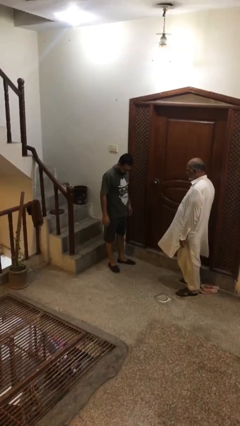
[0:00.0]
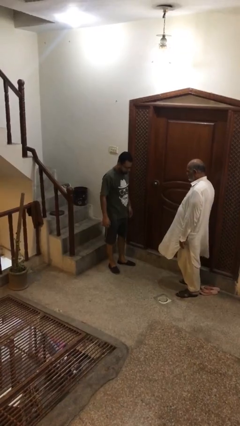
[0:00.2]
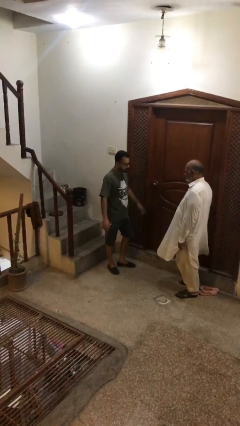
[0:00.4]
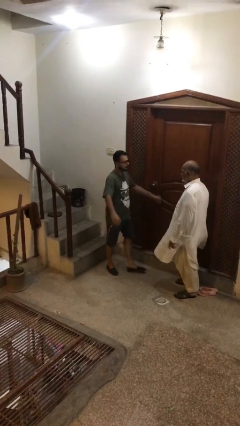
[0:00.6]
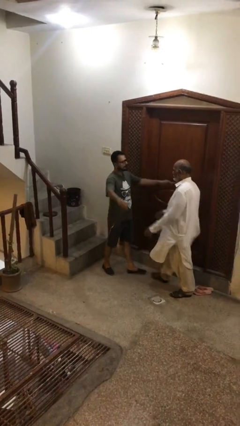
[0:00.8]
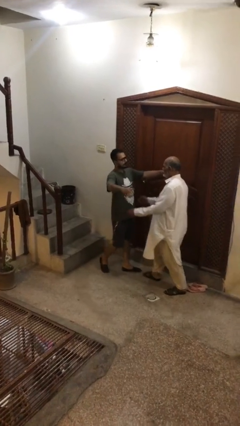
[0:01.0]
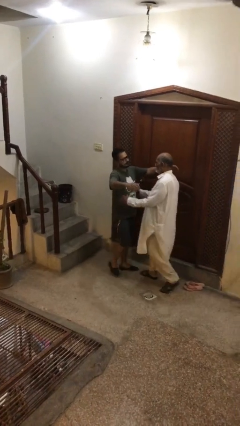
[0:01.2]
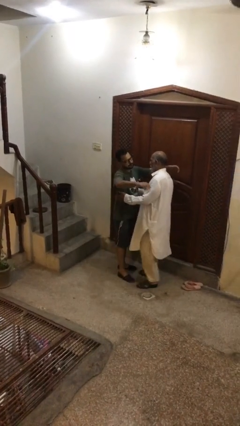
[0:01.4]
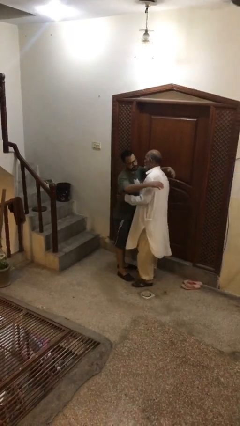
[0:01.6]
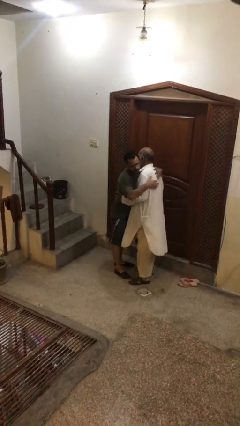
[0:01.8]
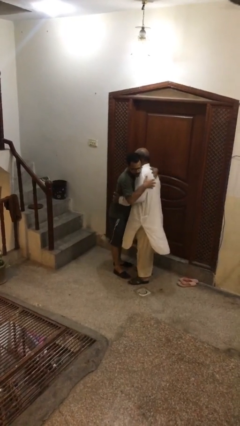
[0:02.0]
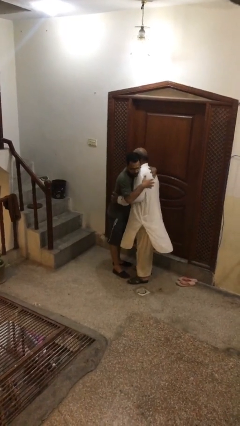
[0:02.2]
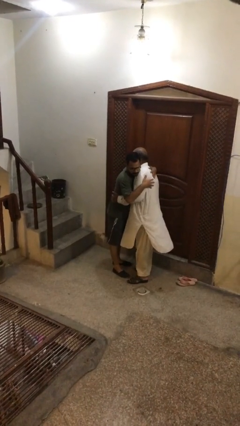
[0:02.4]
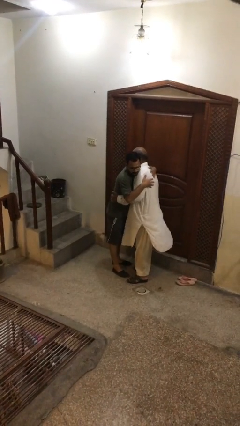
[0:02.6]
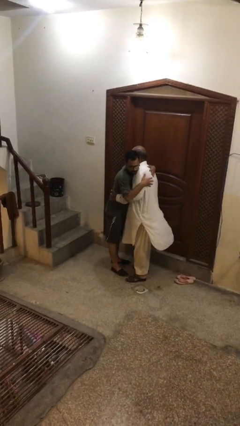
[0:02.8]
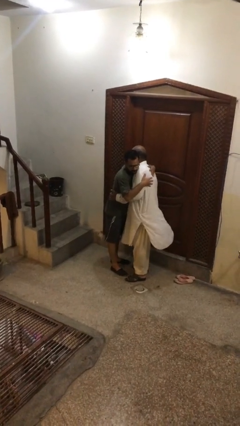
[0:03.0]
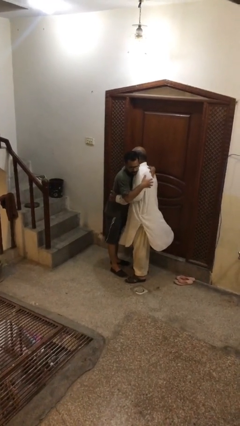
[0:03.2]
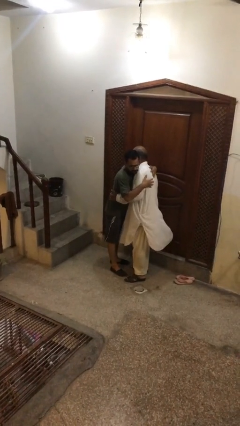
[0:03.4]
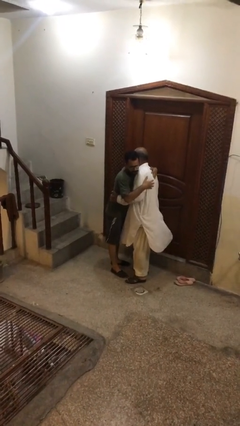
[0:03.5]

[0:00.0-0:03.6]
person embraces person

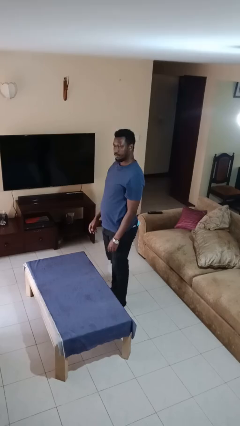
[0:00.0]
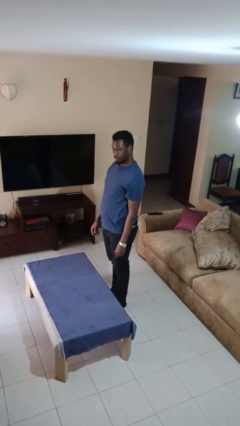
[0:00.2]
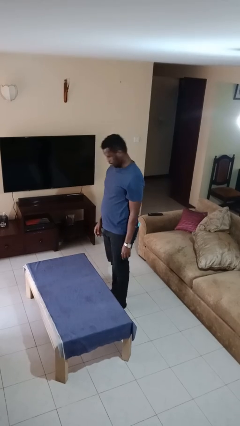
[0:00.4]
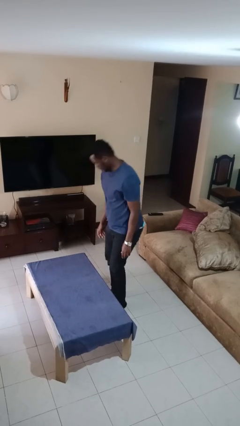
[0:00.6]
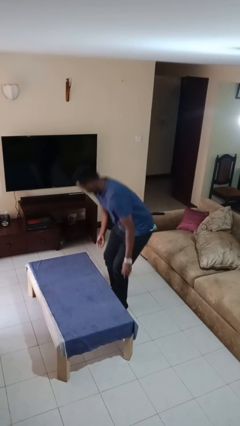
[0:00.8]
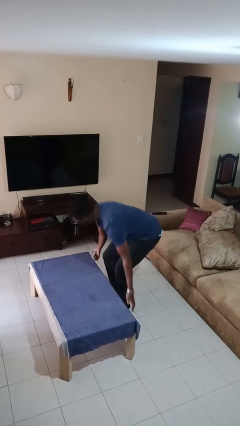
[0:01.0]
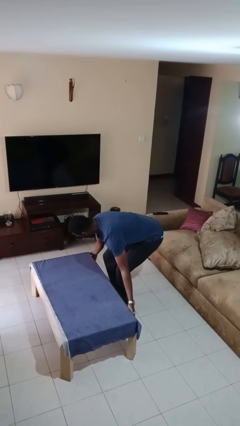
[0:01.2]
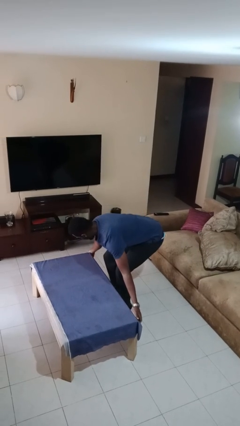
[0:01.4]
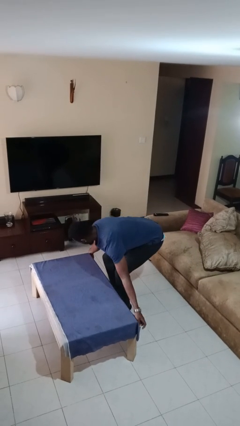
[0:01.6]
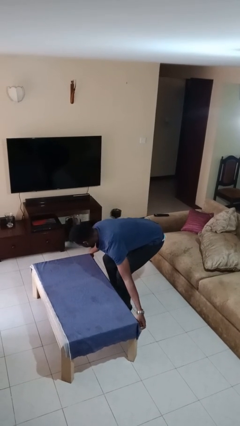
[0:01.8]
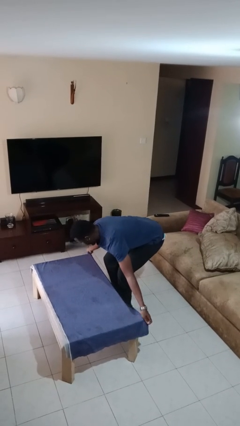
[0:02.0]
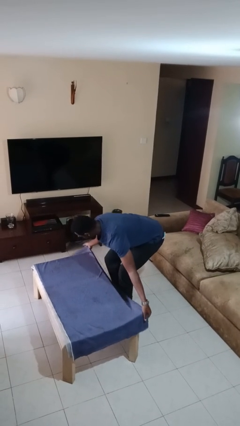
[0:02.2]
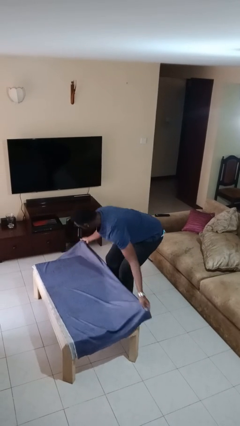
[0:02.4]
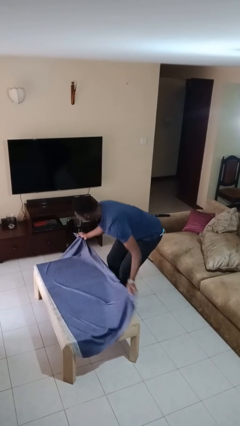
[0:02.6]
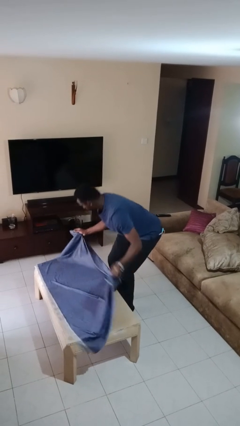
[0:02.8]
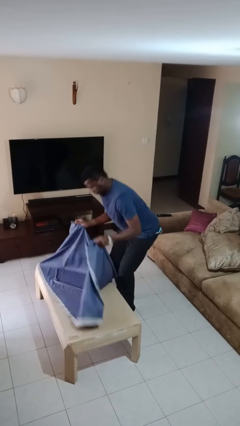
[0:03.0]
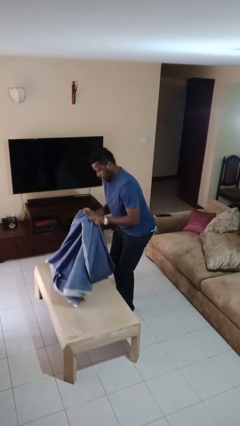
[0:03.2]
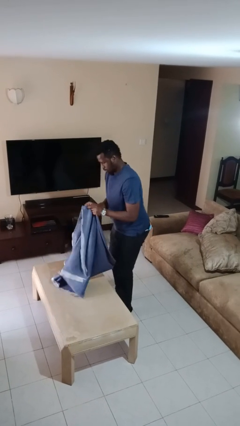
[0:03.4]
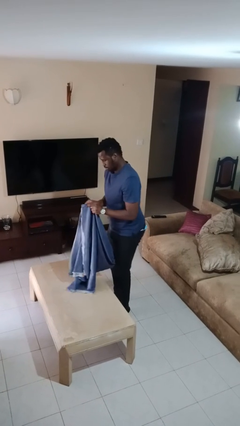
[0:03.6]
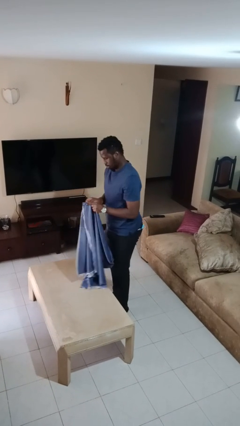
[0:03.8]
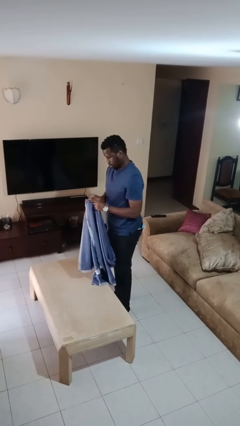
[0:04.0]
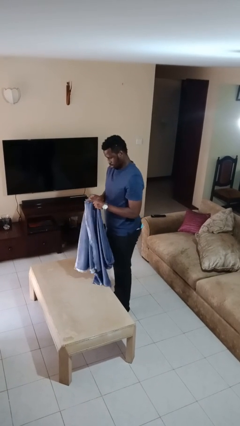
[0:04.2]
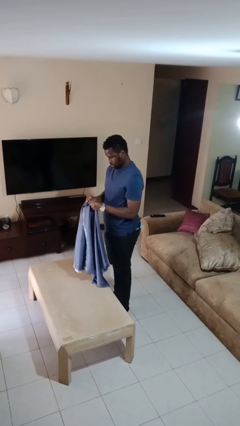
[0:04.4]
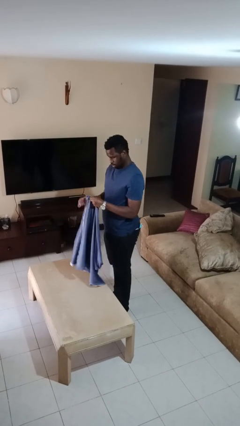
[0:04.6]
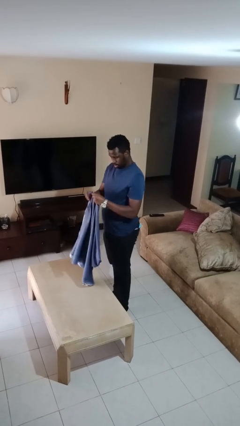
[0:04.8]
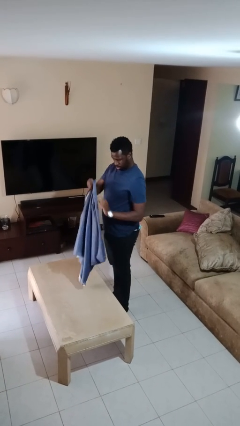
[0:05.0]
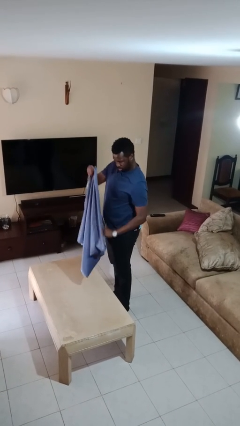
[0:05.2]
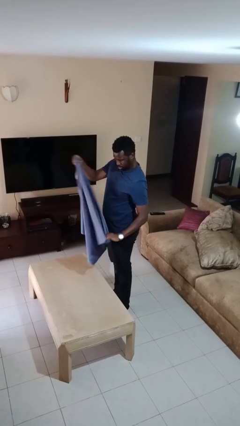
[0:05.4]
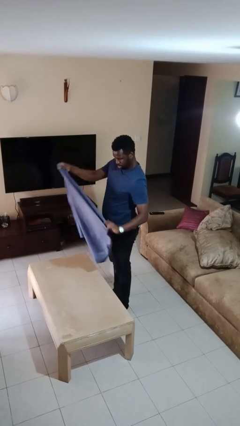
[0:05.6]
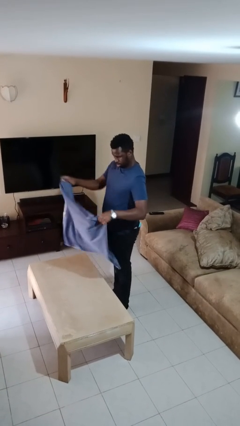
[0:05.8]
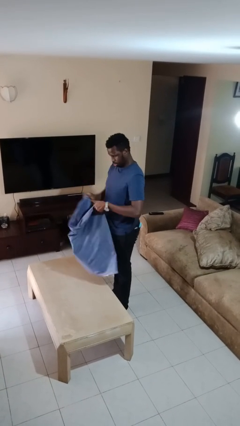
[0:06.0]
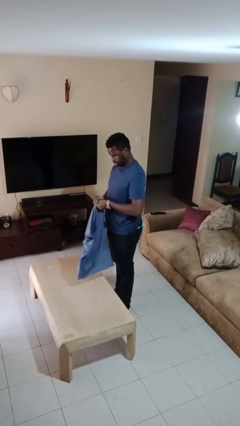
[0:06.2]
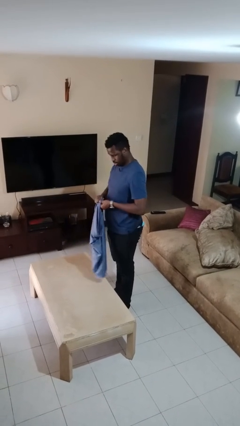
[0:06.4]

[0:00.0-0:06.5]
person folds tablecloth

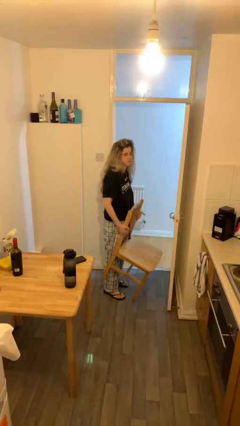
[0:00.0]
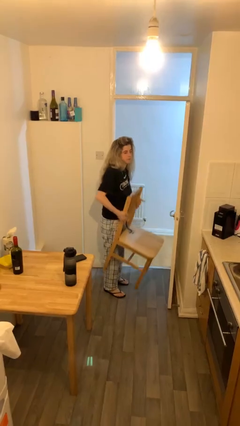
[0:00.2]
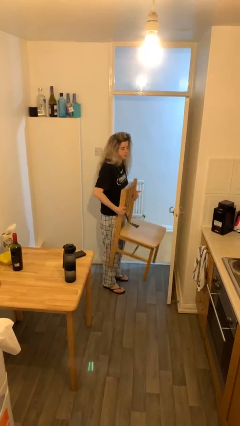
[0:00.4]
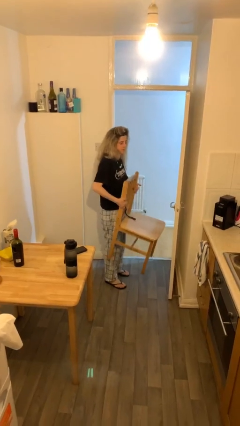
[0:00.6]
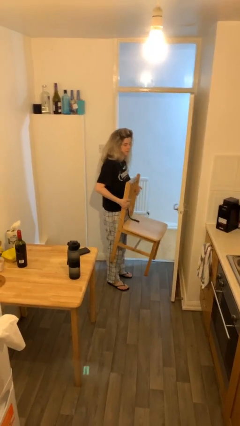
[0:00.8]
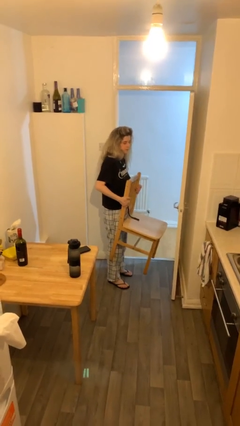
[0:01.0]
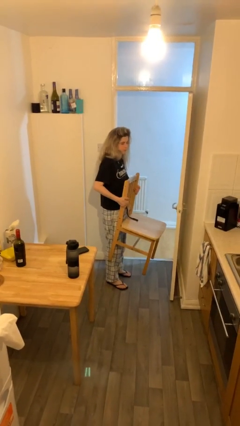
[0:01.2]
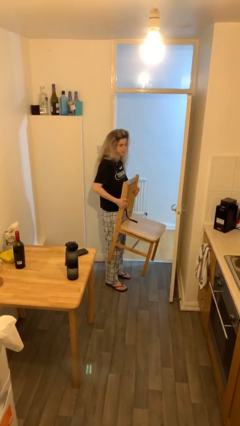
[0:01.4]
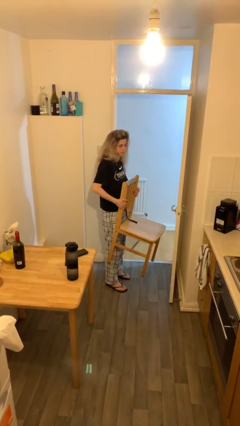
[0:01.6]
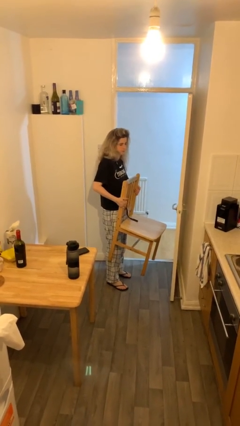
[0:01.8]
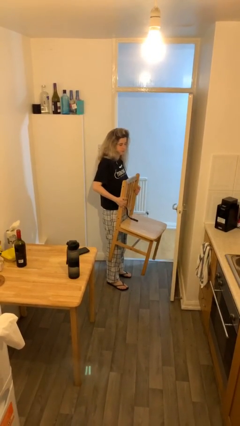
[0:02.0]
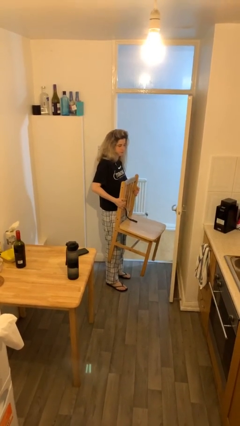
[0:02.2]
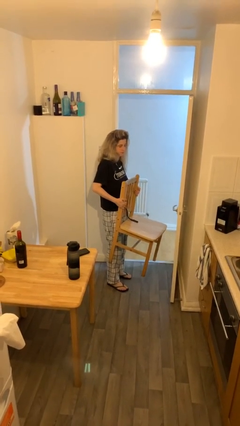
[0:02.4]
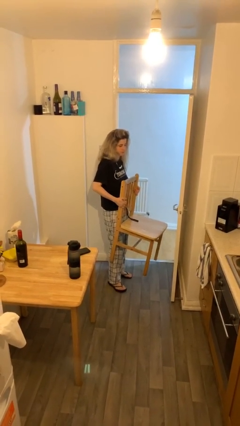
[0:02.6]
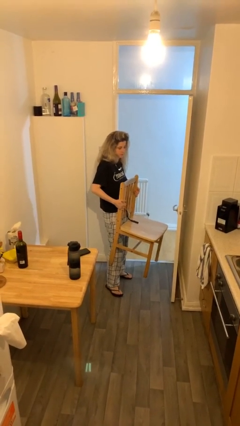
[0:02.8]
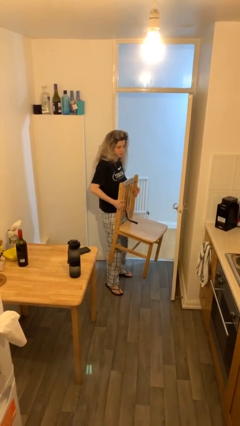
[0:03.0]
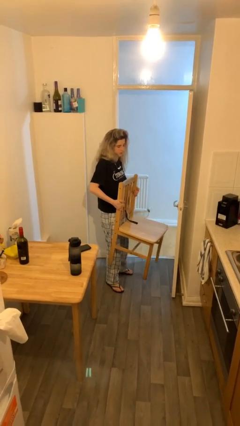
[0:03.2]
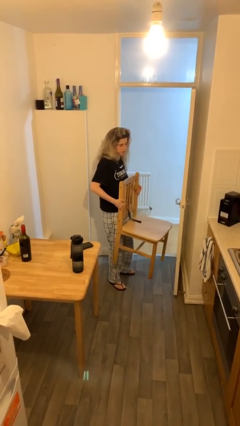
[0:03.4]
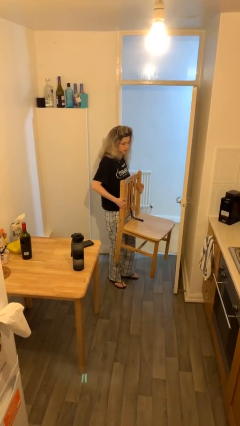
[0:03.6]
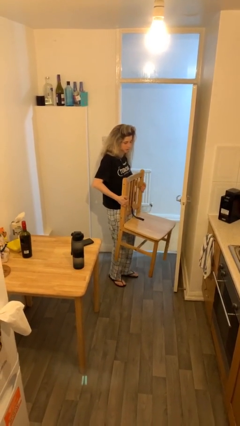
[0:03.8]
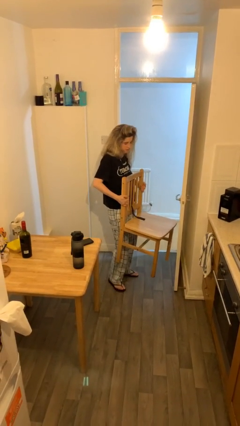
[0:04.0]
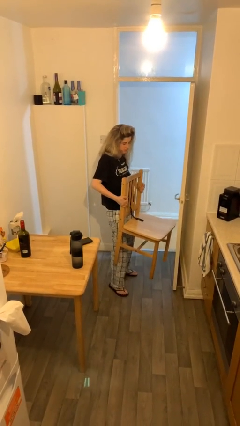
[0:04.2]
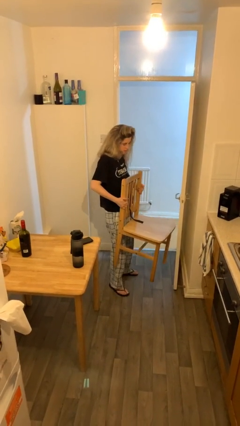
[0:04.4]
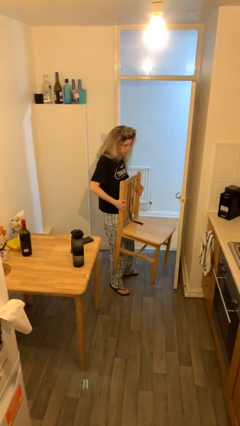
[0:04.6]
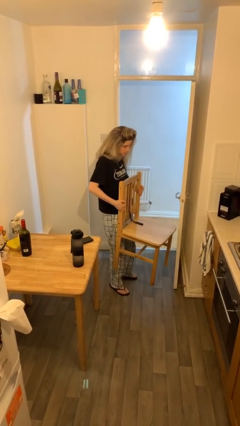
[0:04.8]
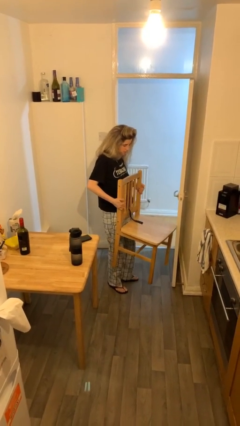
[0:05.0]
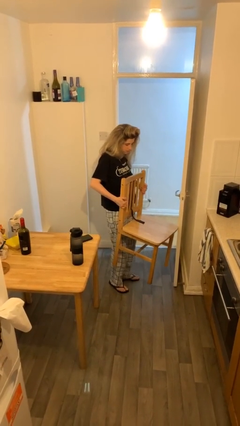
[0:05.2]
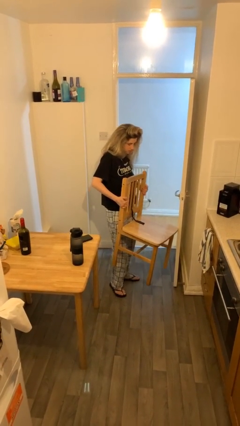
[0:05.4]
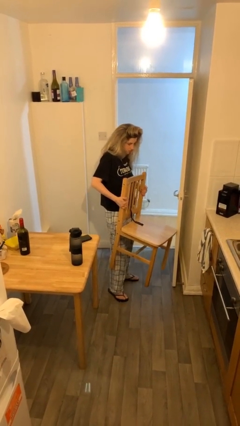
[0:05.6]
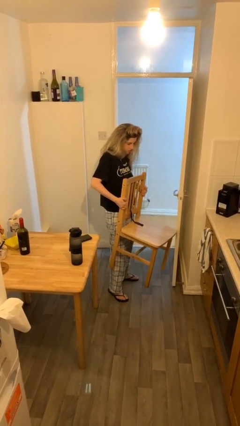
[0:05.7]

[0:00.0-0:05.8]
person carries heavy object

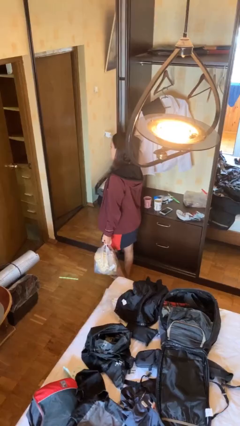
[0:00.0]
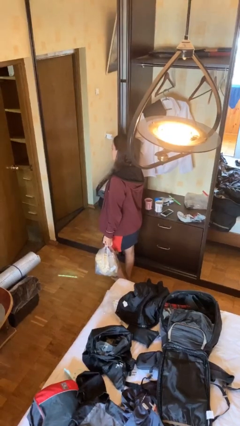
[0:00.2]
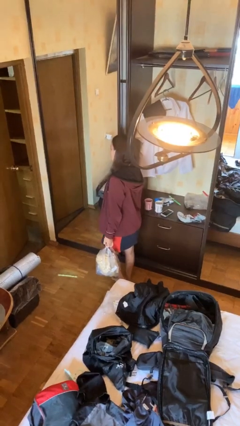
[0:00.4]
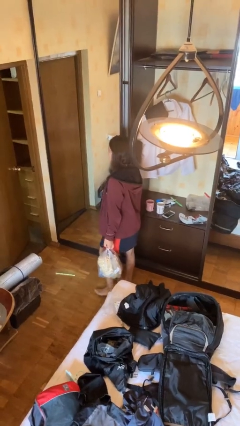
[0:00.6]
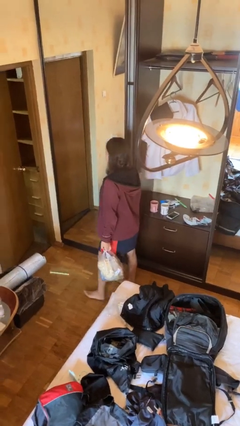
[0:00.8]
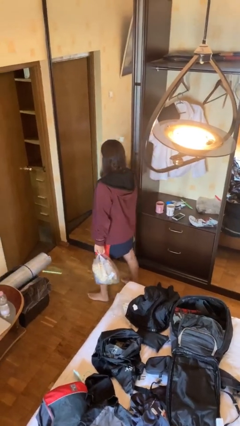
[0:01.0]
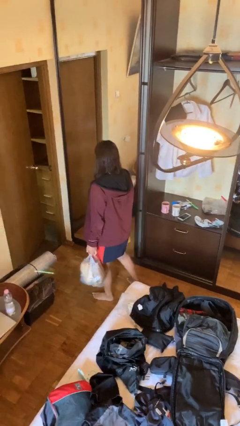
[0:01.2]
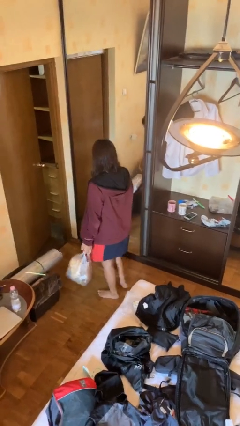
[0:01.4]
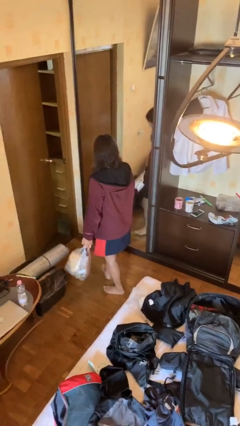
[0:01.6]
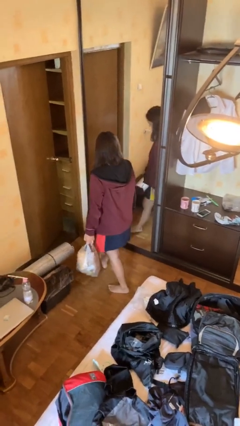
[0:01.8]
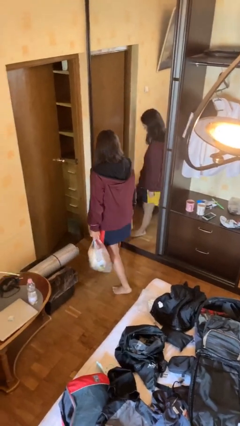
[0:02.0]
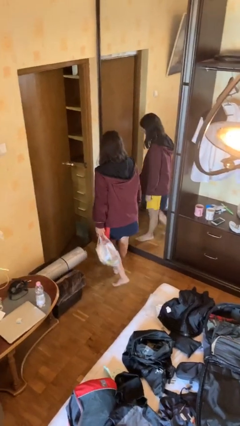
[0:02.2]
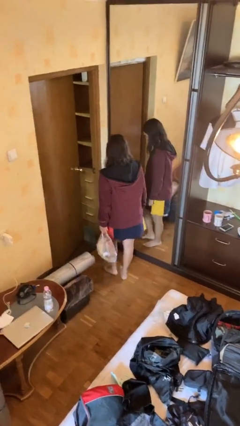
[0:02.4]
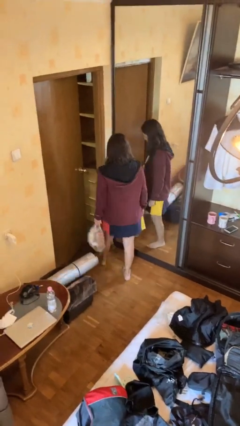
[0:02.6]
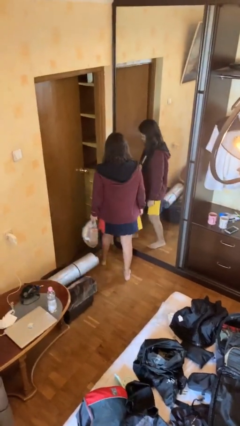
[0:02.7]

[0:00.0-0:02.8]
person carries groceries
